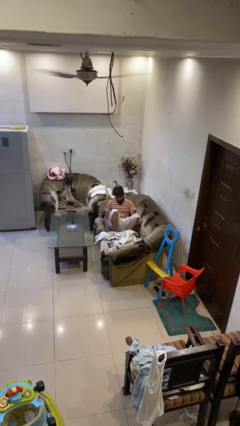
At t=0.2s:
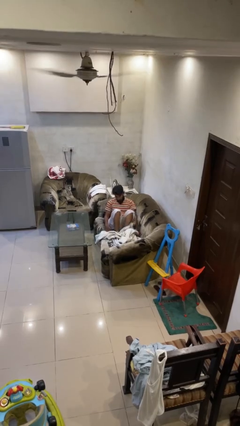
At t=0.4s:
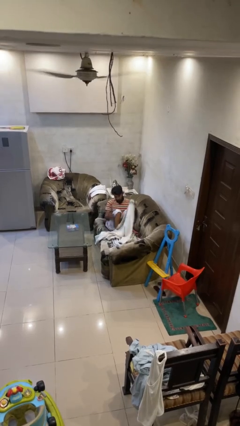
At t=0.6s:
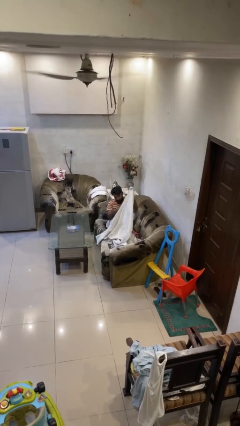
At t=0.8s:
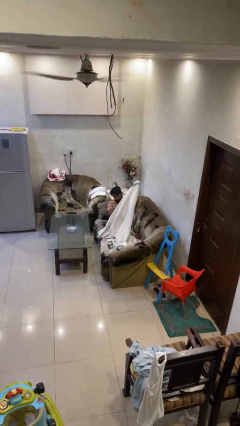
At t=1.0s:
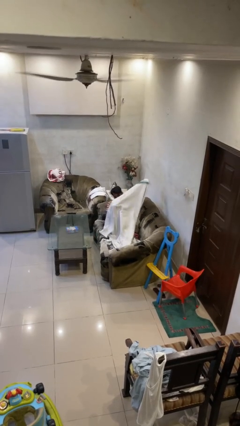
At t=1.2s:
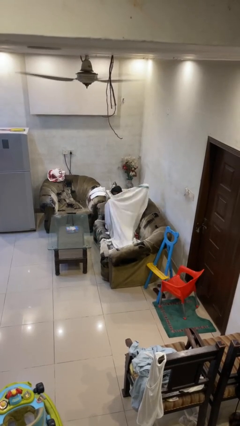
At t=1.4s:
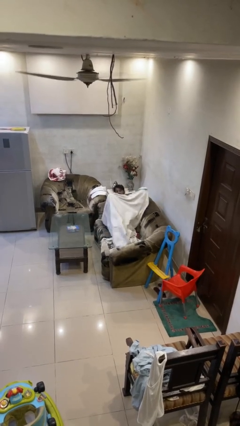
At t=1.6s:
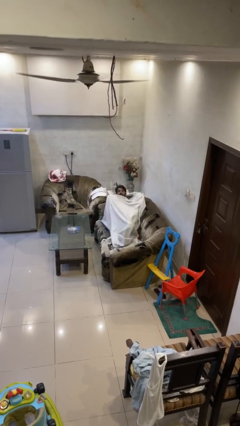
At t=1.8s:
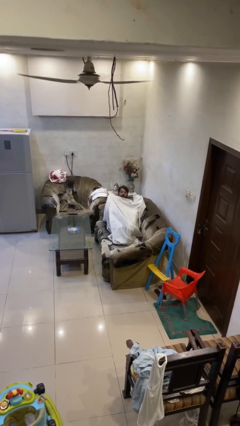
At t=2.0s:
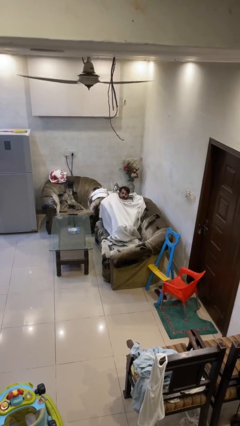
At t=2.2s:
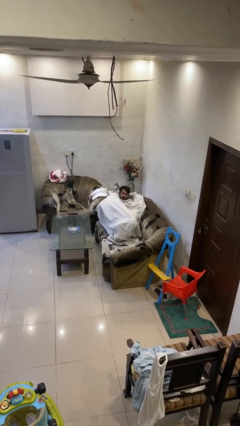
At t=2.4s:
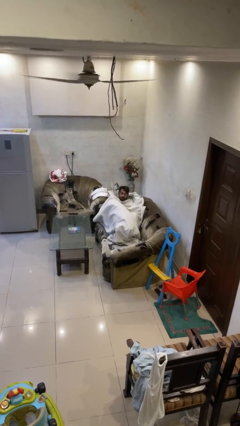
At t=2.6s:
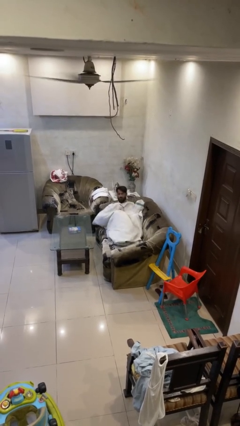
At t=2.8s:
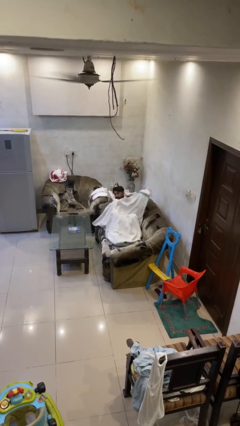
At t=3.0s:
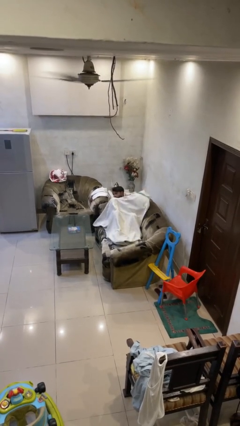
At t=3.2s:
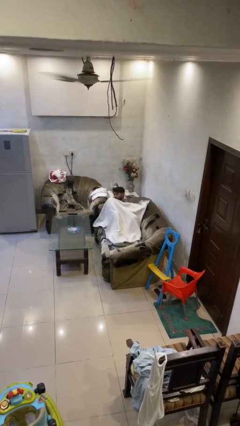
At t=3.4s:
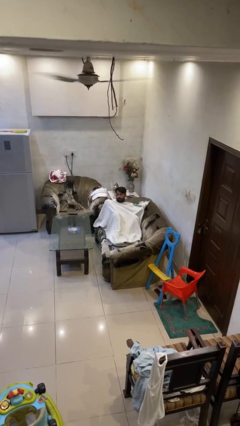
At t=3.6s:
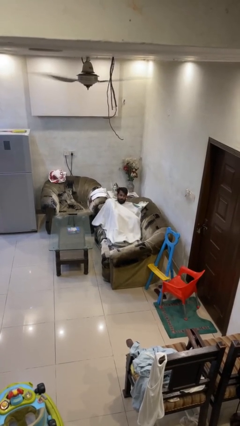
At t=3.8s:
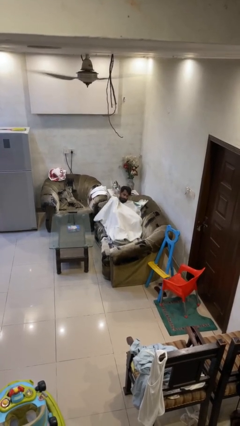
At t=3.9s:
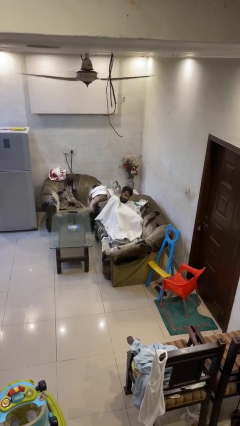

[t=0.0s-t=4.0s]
person covers with blanket

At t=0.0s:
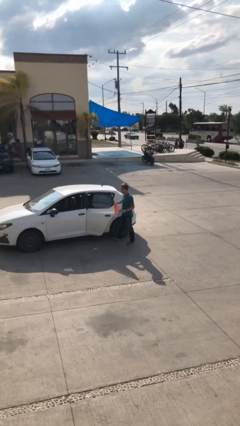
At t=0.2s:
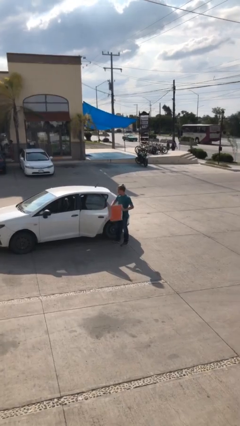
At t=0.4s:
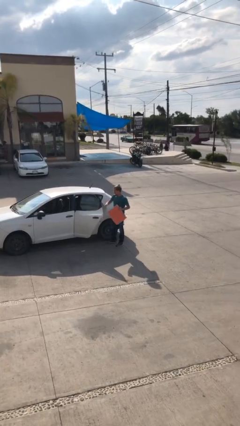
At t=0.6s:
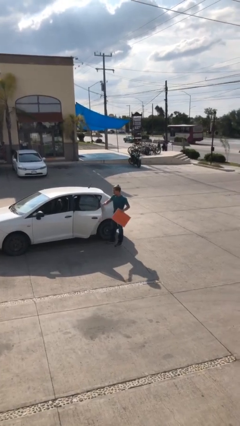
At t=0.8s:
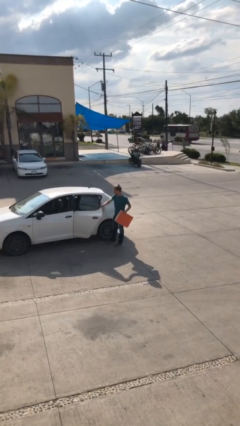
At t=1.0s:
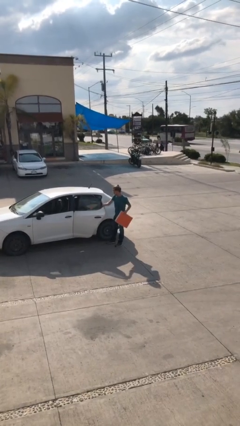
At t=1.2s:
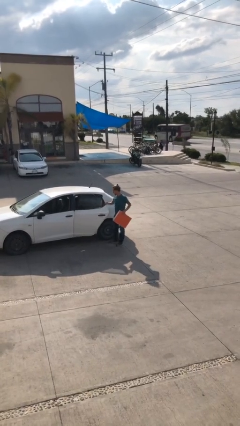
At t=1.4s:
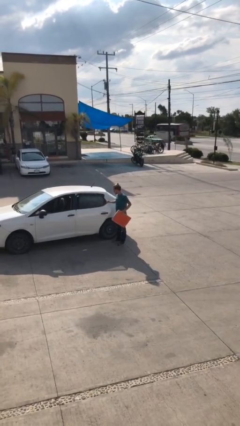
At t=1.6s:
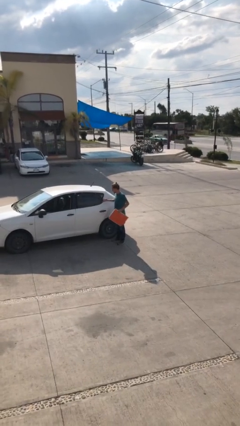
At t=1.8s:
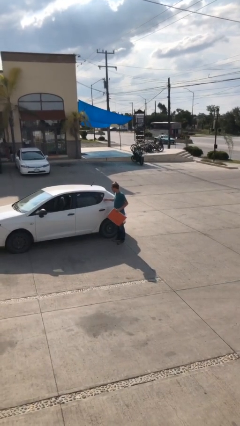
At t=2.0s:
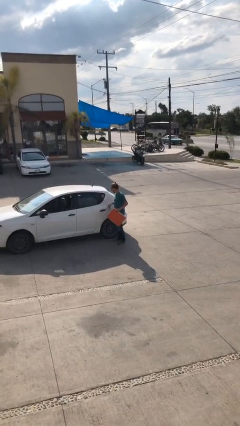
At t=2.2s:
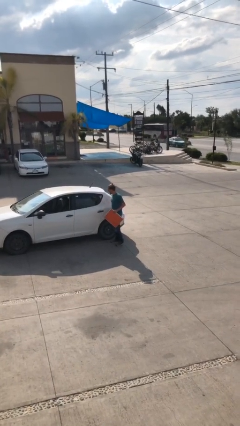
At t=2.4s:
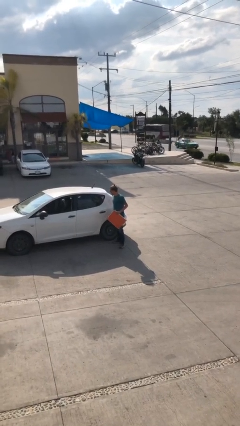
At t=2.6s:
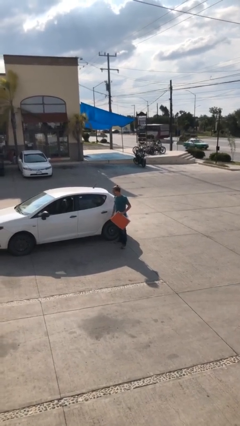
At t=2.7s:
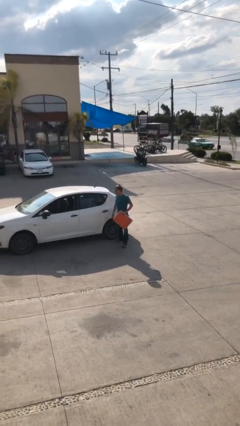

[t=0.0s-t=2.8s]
person closes car door

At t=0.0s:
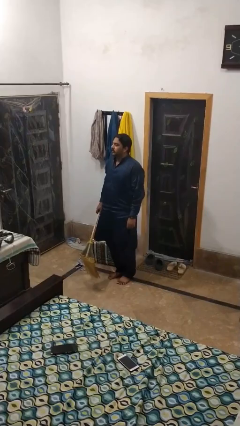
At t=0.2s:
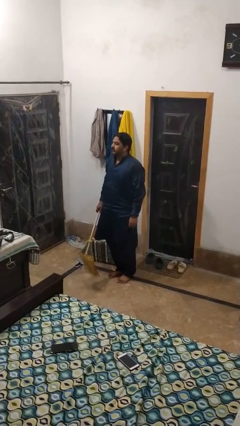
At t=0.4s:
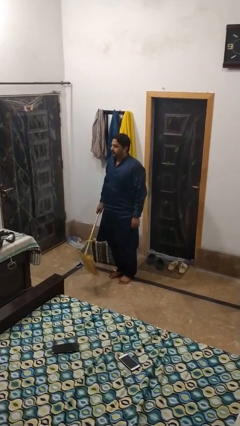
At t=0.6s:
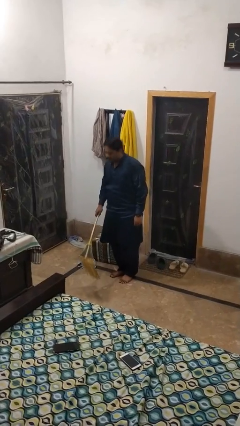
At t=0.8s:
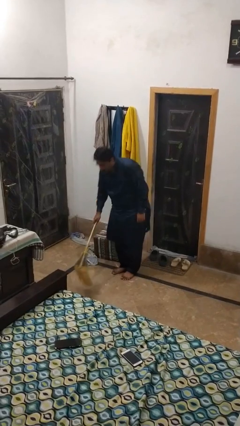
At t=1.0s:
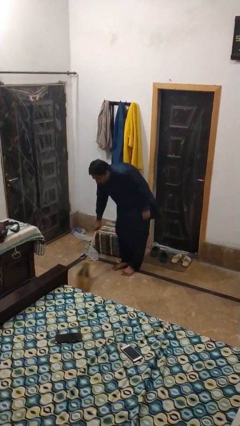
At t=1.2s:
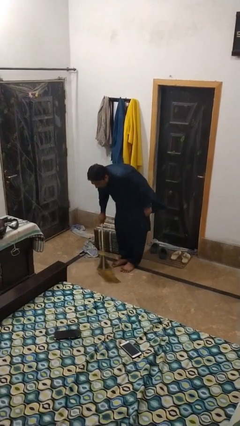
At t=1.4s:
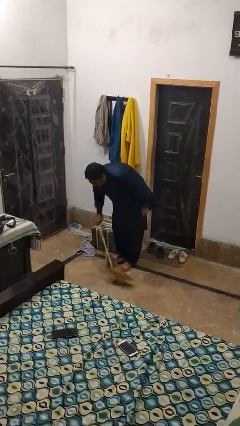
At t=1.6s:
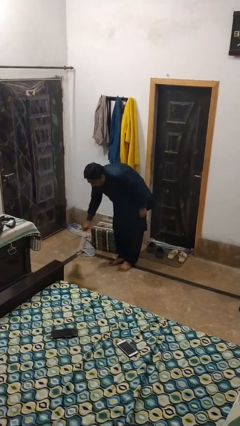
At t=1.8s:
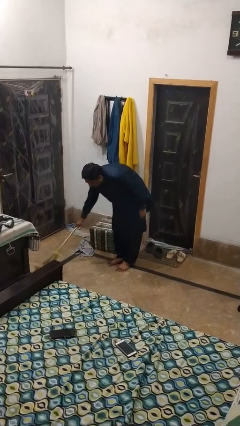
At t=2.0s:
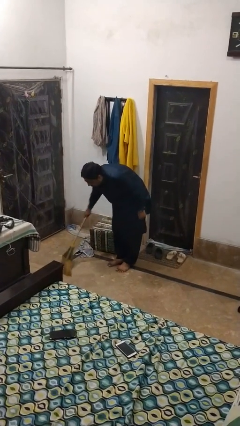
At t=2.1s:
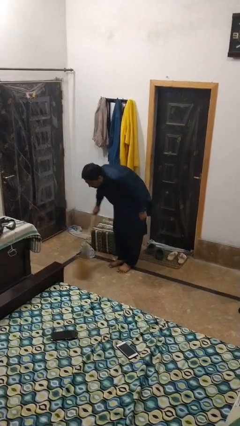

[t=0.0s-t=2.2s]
person sweeps floor

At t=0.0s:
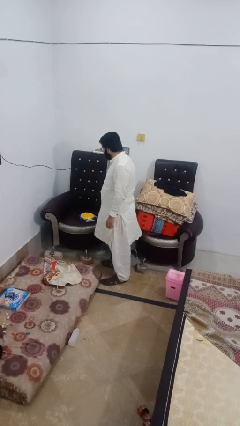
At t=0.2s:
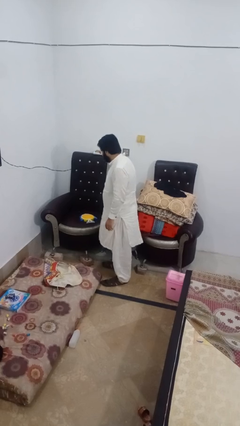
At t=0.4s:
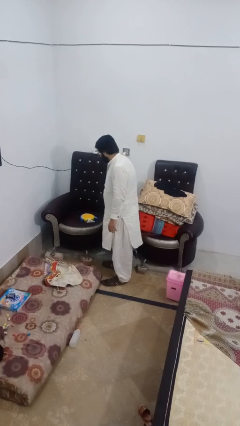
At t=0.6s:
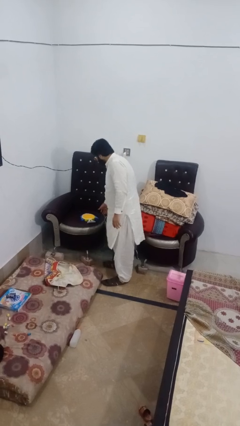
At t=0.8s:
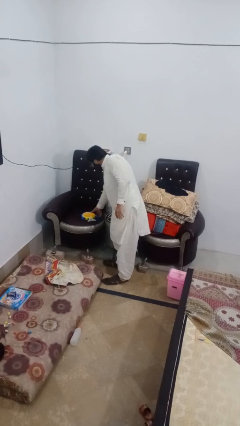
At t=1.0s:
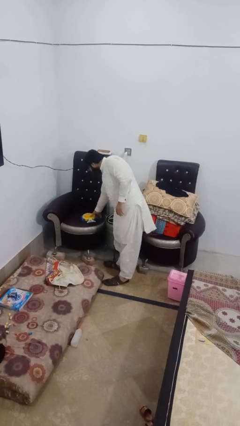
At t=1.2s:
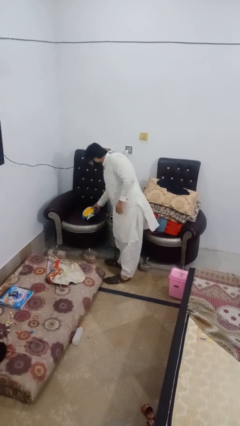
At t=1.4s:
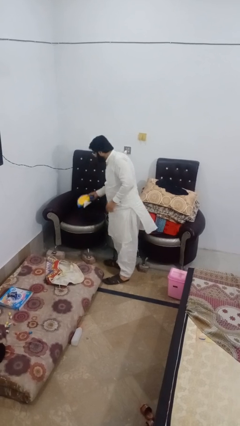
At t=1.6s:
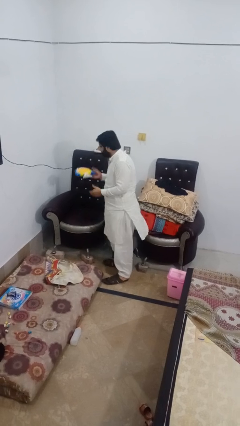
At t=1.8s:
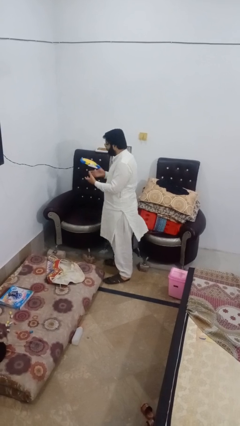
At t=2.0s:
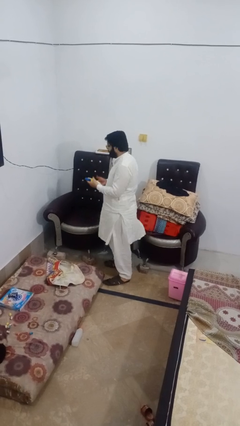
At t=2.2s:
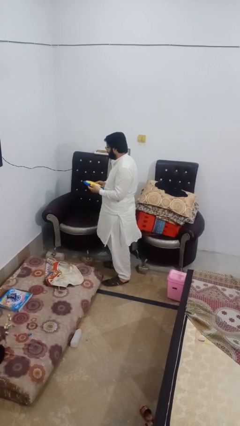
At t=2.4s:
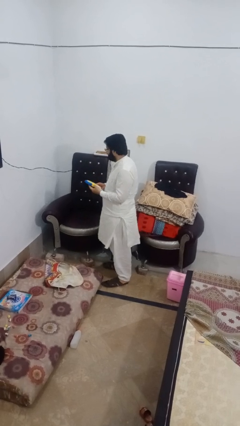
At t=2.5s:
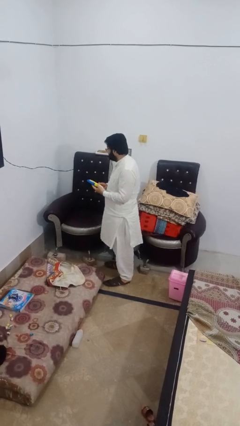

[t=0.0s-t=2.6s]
person picks up object from couch

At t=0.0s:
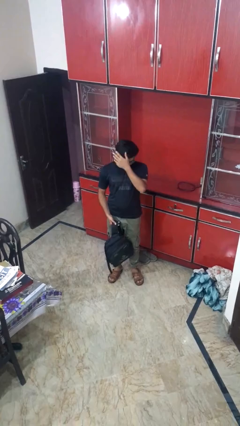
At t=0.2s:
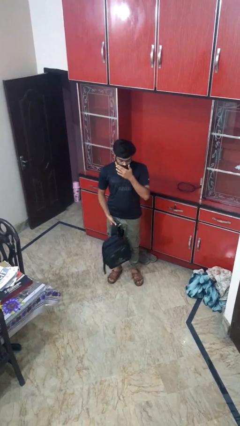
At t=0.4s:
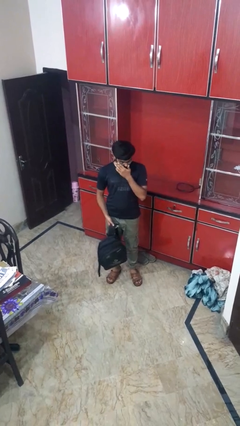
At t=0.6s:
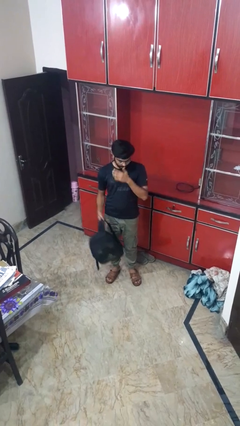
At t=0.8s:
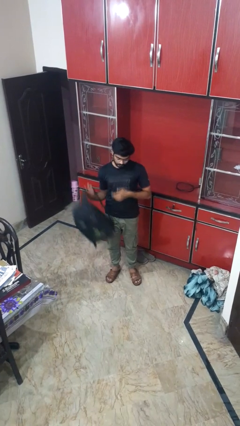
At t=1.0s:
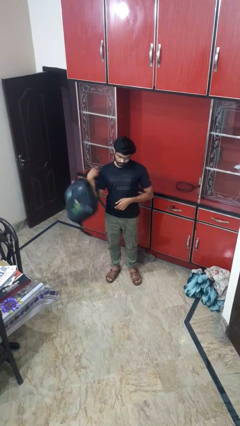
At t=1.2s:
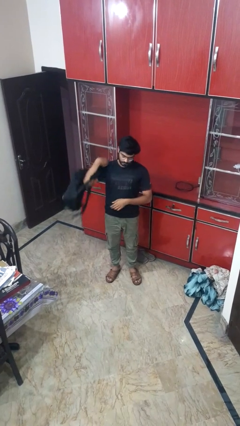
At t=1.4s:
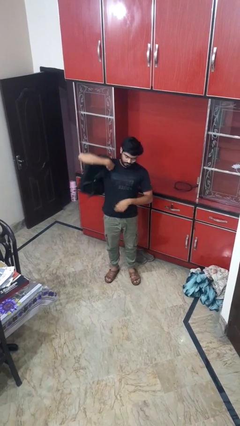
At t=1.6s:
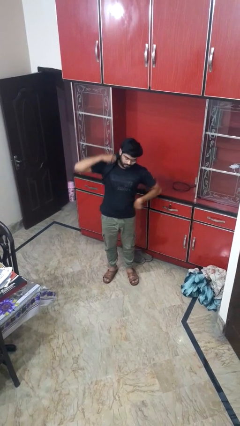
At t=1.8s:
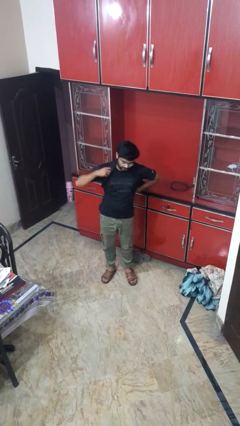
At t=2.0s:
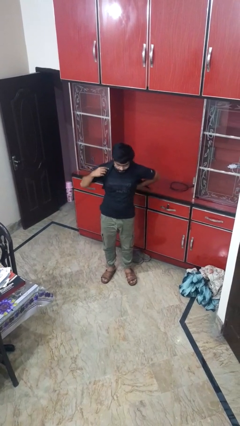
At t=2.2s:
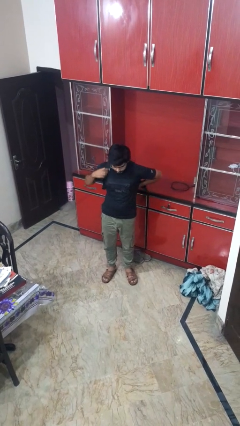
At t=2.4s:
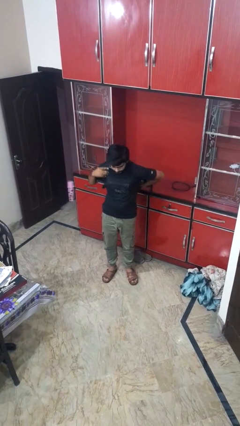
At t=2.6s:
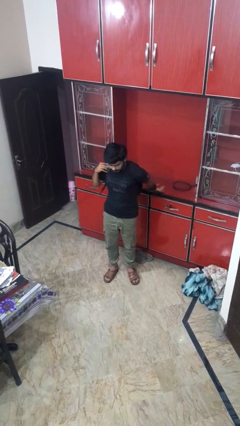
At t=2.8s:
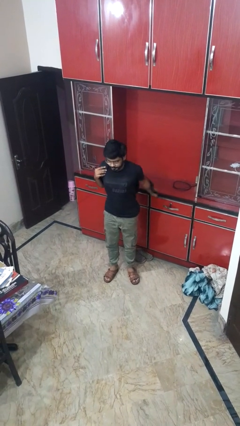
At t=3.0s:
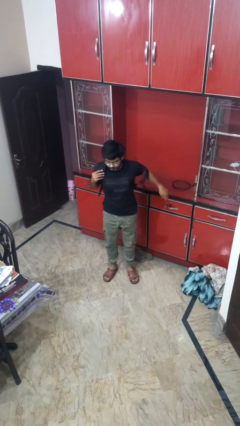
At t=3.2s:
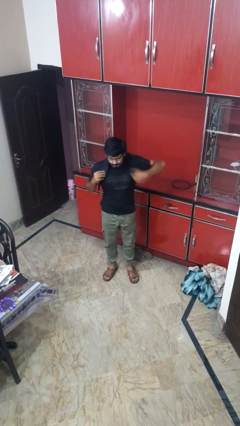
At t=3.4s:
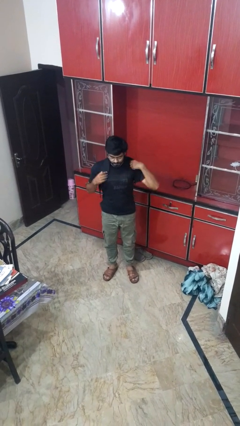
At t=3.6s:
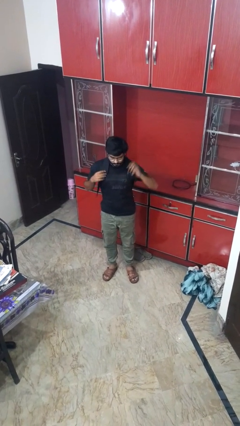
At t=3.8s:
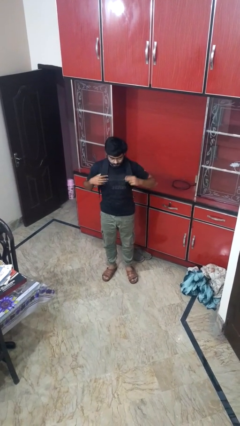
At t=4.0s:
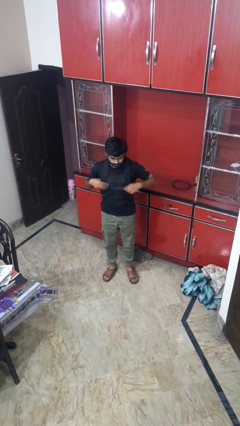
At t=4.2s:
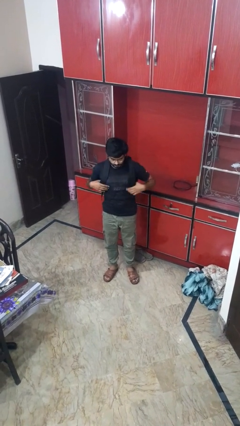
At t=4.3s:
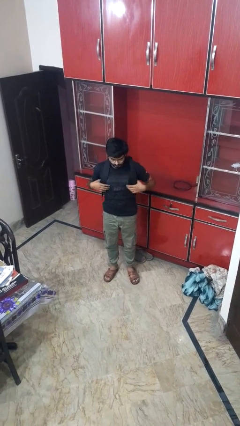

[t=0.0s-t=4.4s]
person puts on backpack

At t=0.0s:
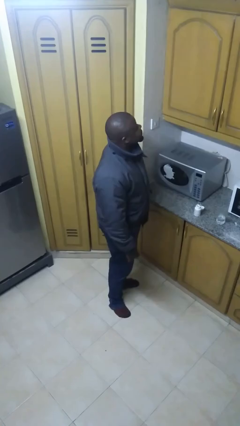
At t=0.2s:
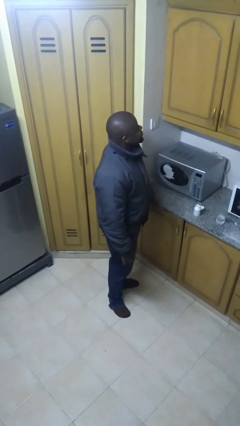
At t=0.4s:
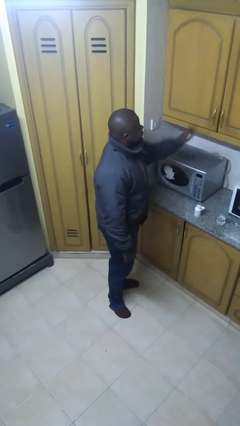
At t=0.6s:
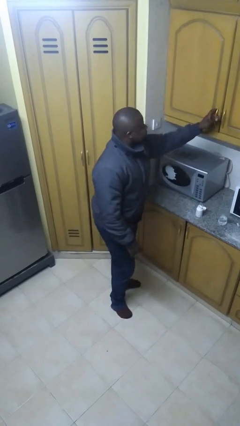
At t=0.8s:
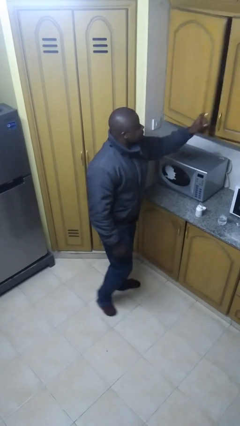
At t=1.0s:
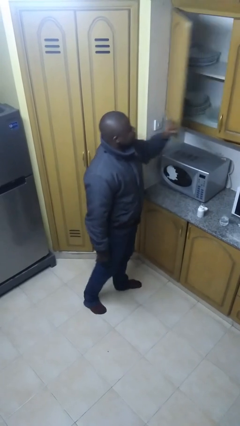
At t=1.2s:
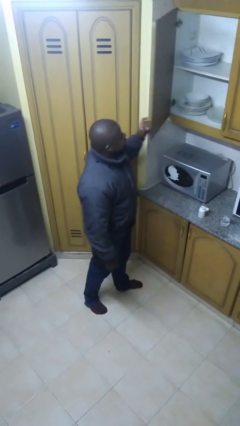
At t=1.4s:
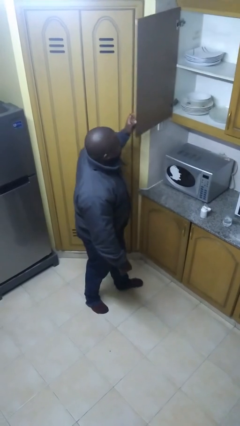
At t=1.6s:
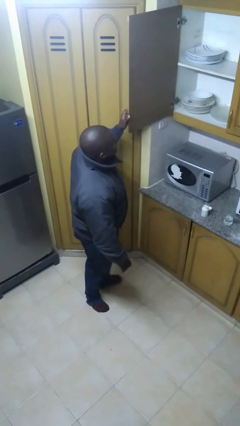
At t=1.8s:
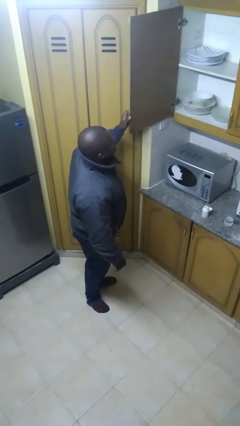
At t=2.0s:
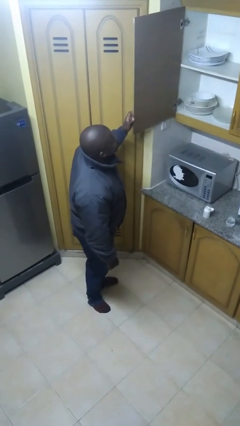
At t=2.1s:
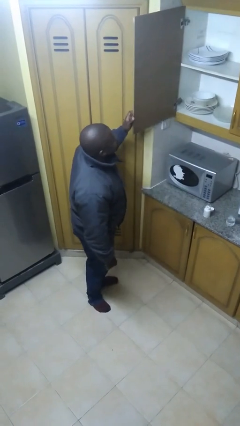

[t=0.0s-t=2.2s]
person closes cabinet
